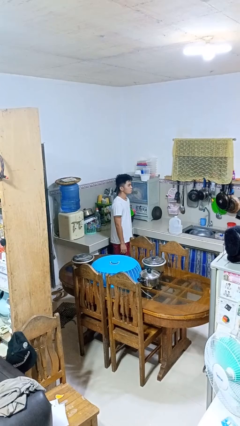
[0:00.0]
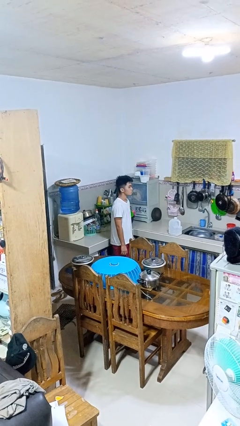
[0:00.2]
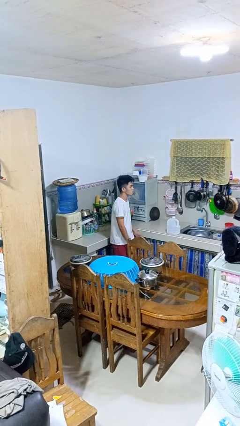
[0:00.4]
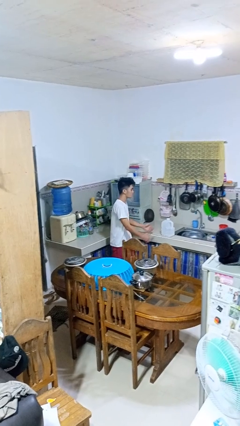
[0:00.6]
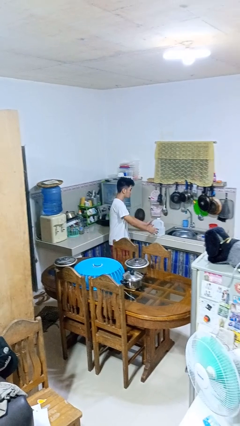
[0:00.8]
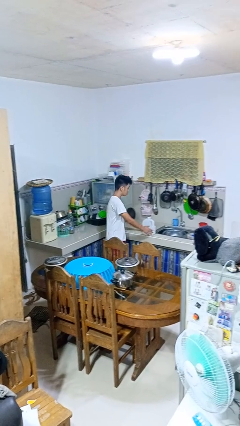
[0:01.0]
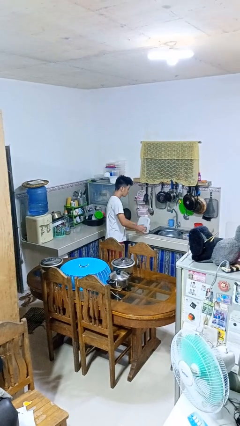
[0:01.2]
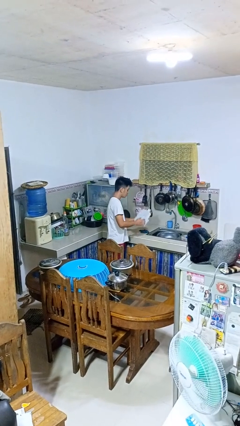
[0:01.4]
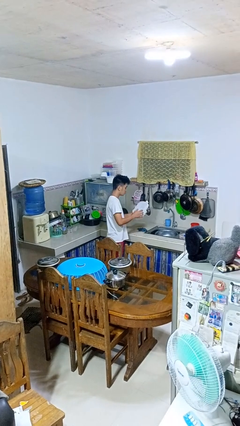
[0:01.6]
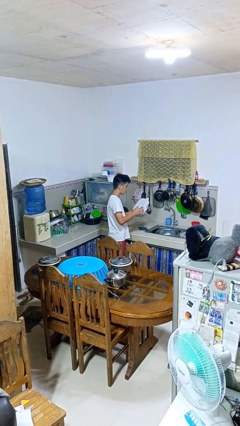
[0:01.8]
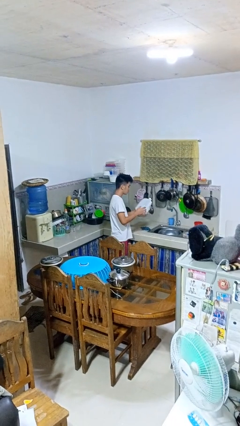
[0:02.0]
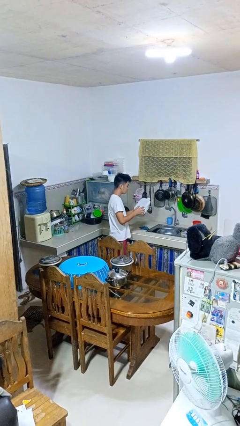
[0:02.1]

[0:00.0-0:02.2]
person picks up object from countertop

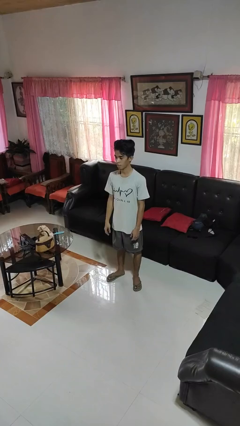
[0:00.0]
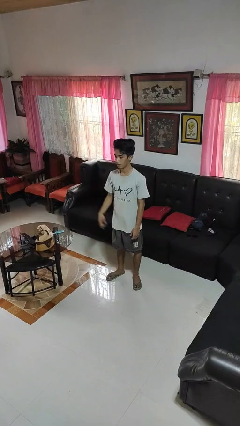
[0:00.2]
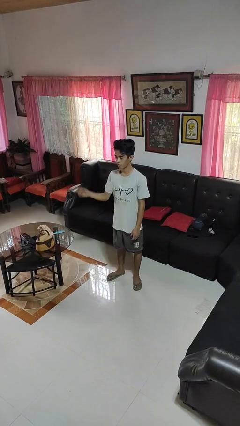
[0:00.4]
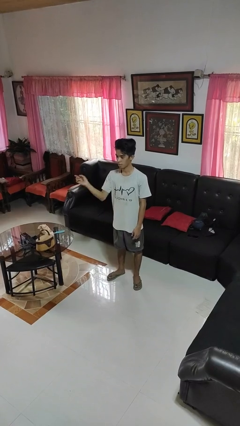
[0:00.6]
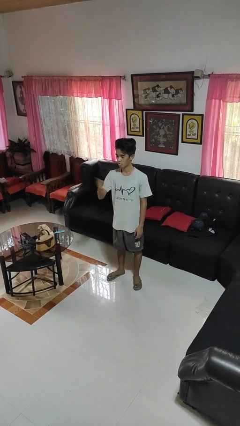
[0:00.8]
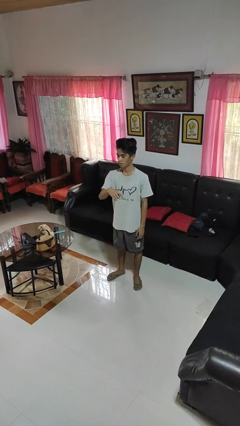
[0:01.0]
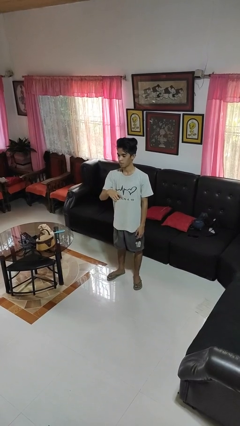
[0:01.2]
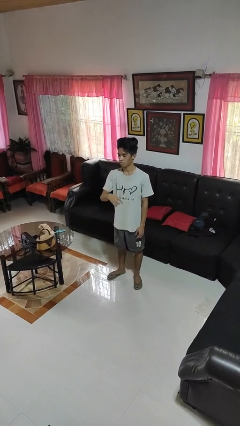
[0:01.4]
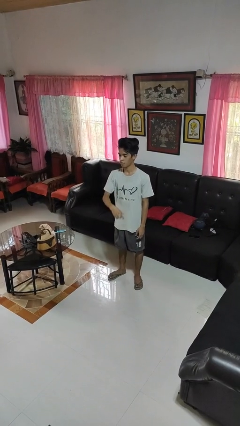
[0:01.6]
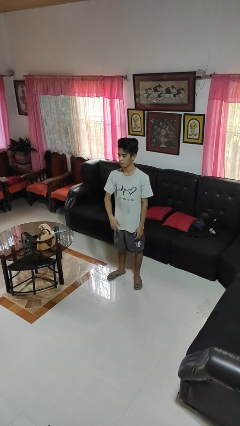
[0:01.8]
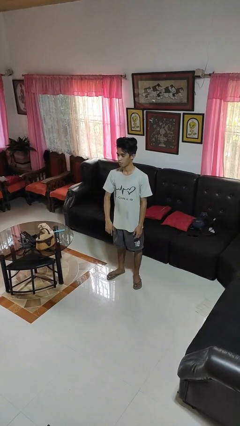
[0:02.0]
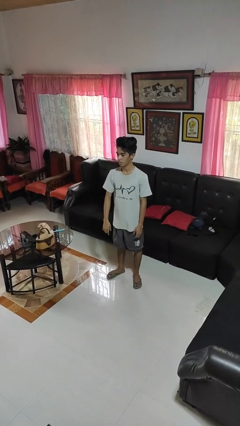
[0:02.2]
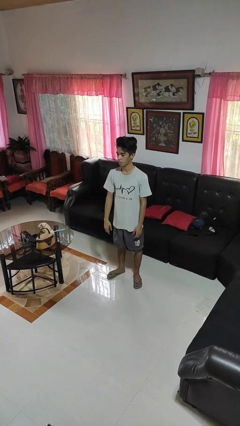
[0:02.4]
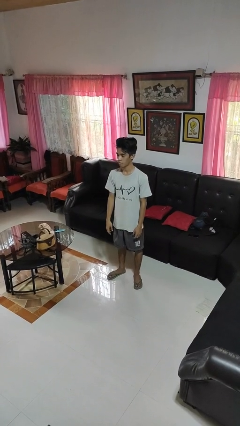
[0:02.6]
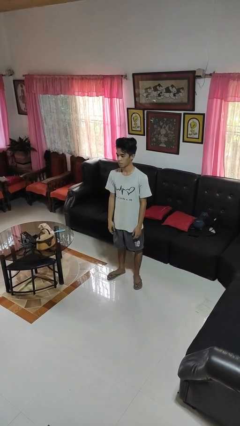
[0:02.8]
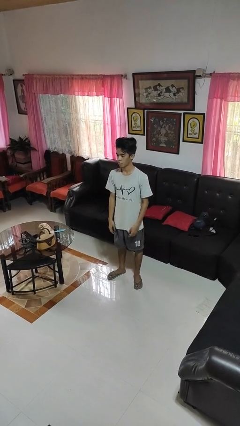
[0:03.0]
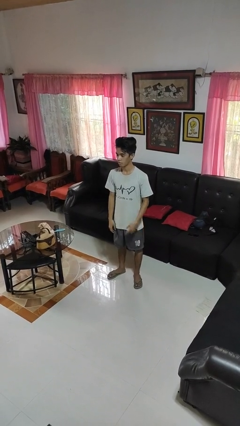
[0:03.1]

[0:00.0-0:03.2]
person gestures swipe left

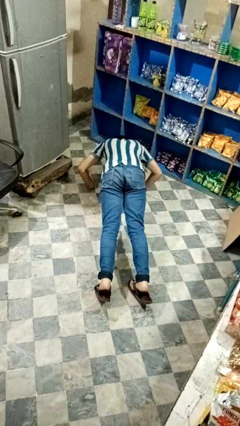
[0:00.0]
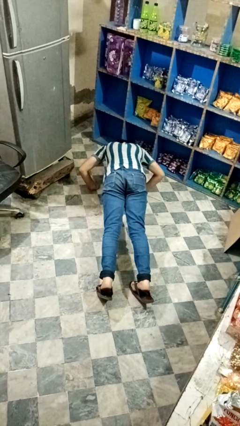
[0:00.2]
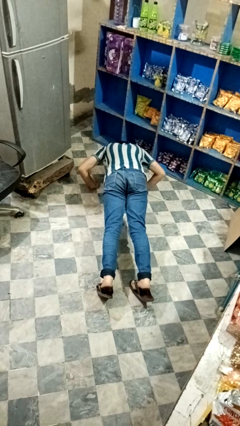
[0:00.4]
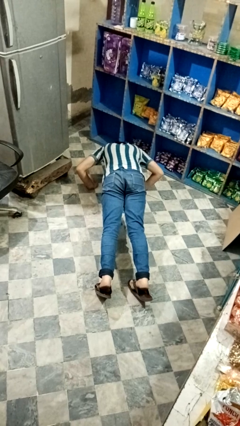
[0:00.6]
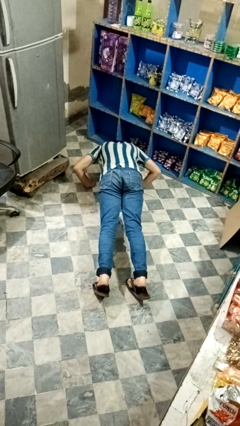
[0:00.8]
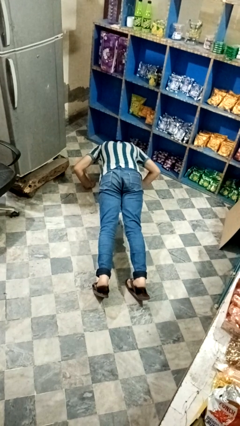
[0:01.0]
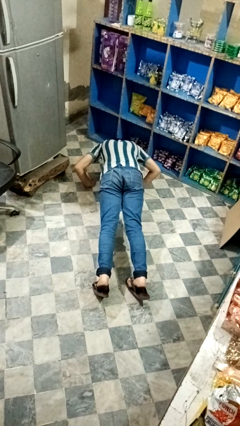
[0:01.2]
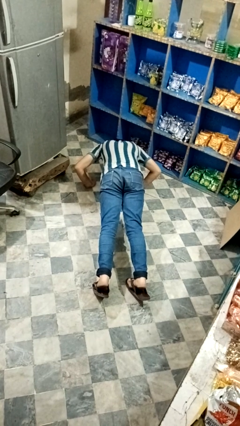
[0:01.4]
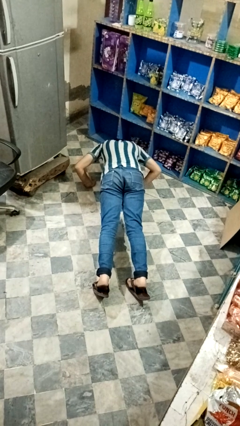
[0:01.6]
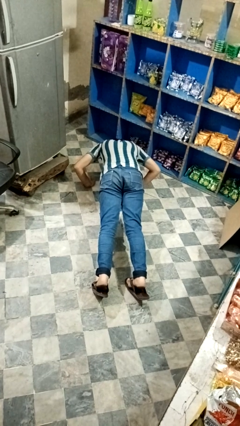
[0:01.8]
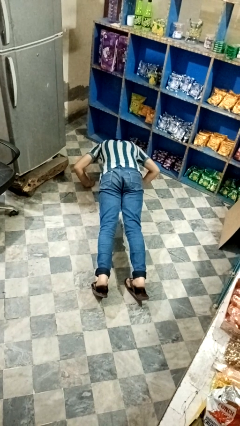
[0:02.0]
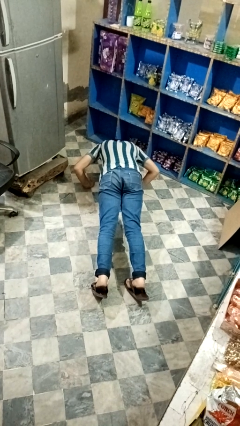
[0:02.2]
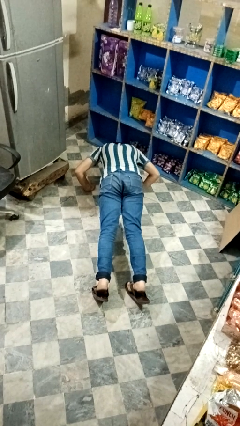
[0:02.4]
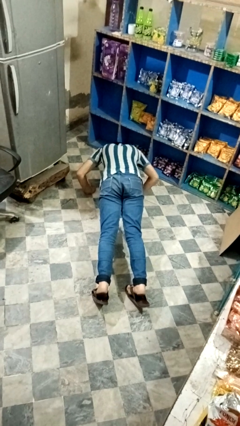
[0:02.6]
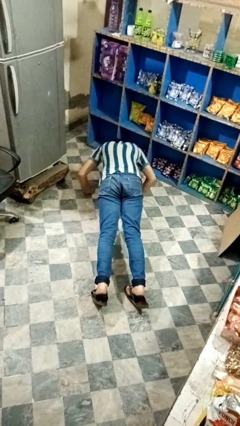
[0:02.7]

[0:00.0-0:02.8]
person exercises with pushup

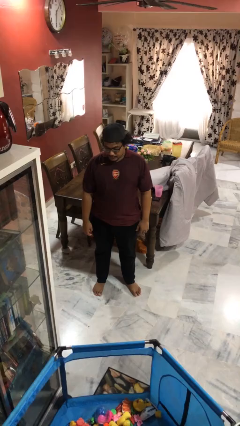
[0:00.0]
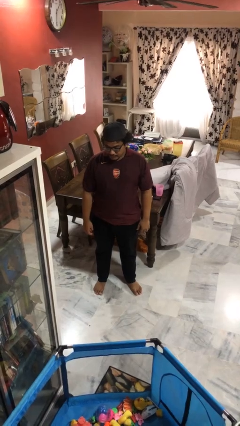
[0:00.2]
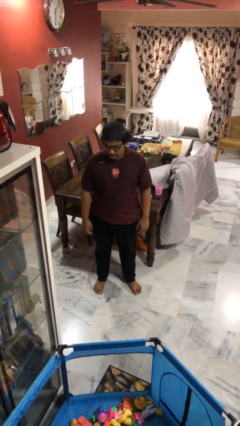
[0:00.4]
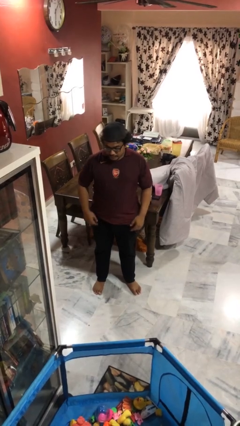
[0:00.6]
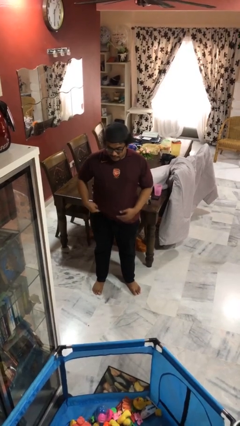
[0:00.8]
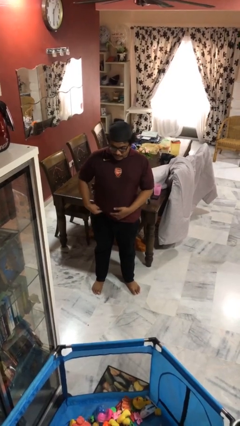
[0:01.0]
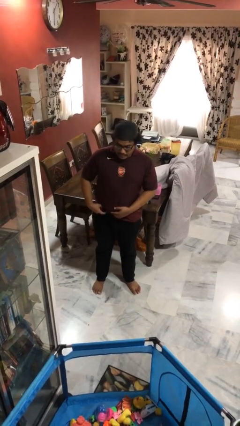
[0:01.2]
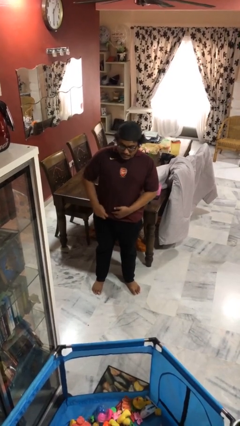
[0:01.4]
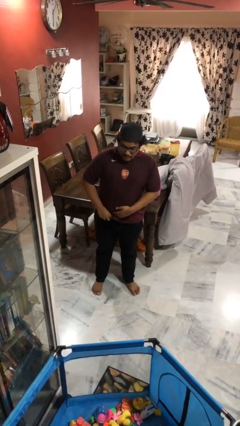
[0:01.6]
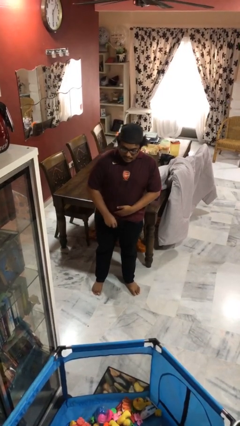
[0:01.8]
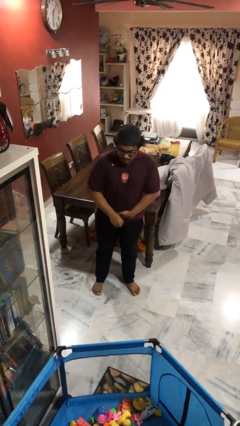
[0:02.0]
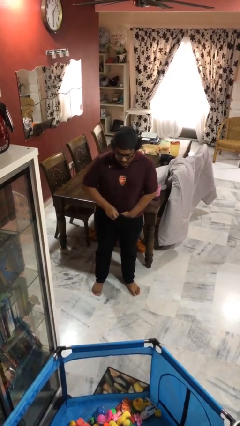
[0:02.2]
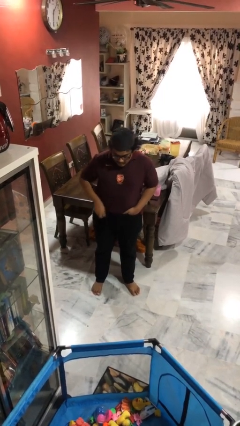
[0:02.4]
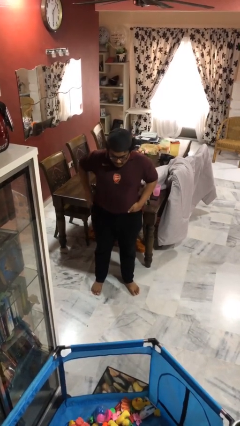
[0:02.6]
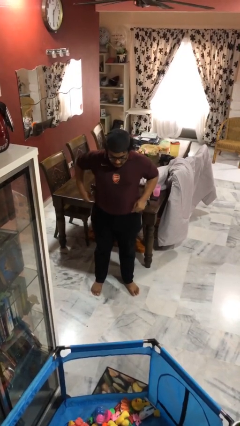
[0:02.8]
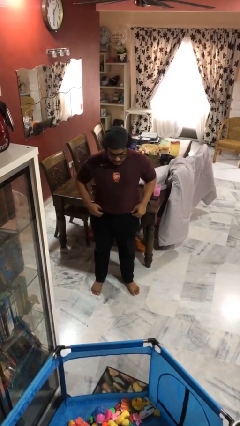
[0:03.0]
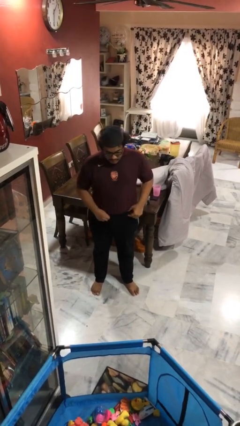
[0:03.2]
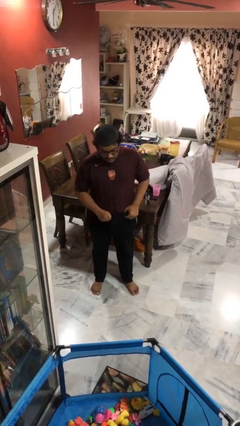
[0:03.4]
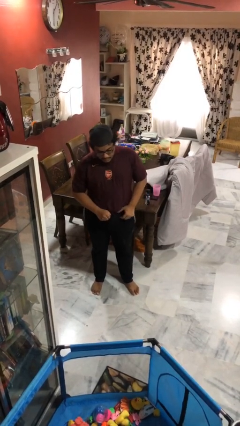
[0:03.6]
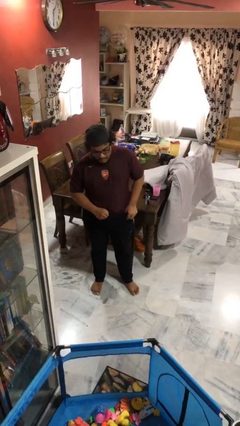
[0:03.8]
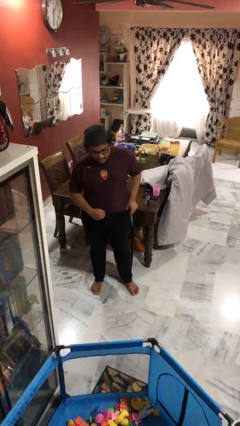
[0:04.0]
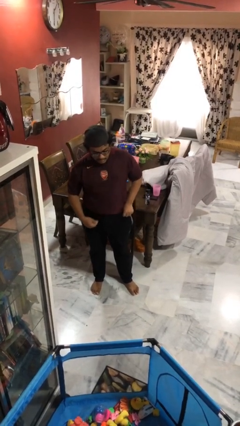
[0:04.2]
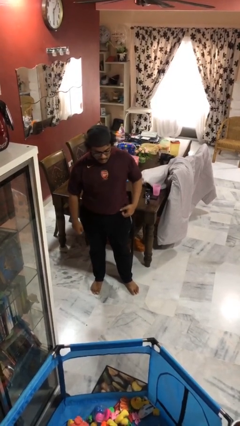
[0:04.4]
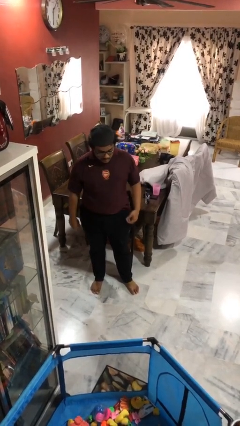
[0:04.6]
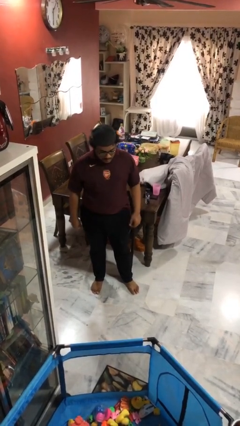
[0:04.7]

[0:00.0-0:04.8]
person tucks in shirt

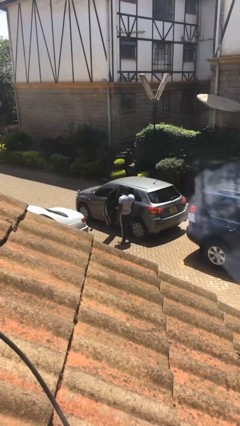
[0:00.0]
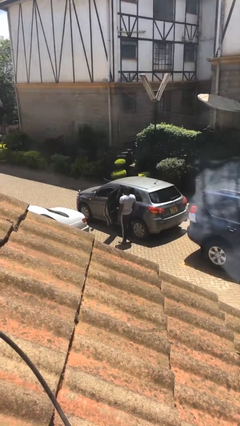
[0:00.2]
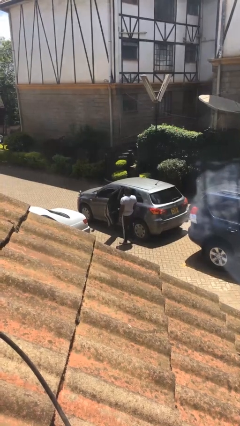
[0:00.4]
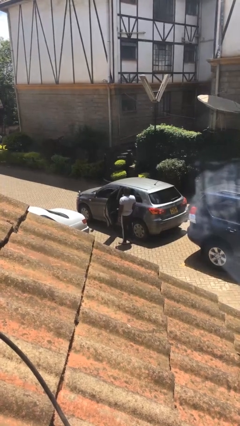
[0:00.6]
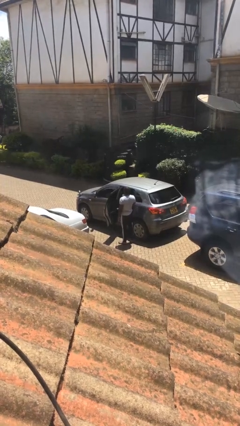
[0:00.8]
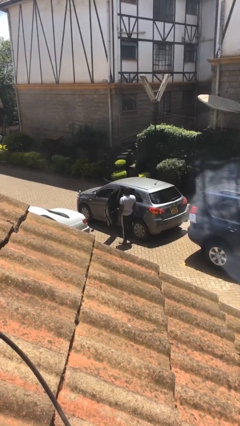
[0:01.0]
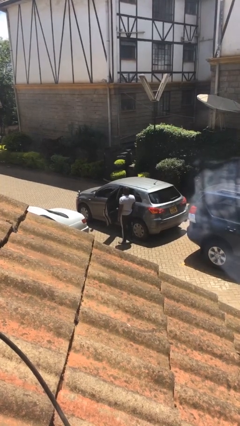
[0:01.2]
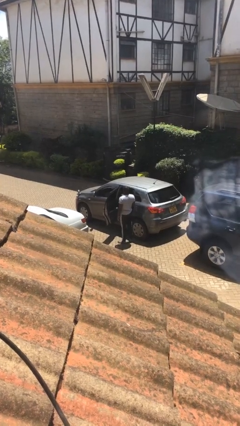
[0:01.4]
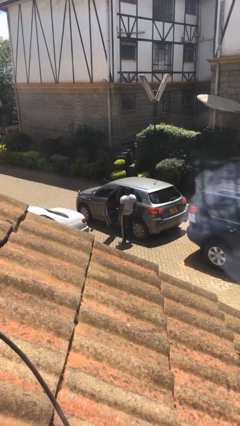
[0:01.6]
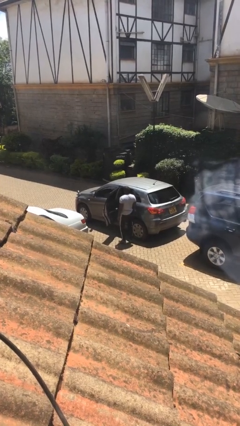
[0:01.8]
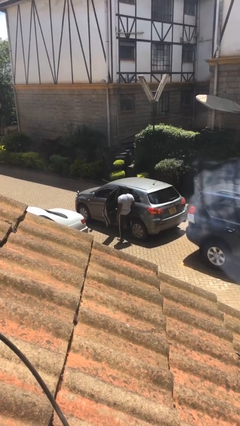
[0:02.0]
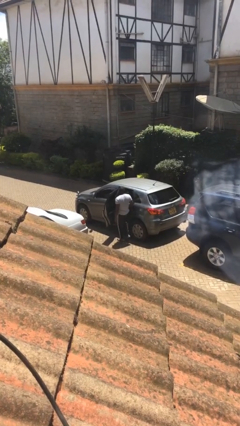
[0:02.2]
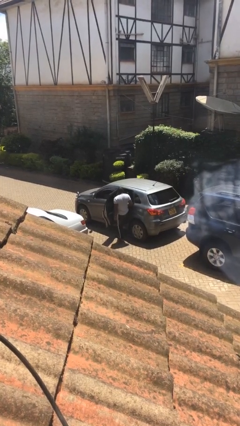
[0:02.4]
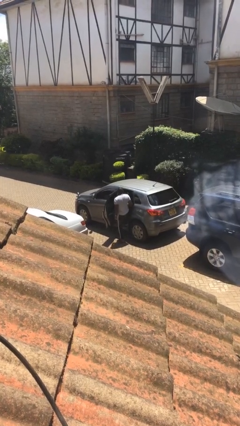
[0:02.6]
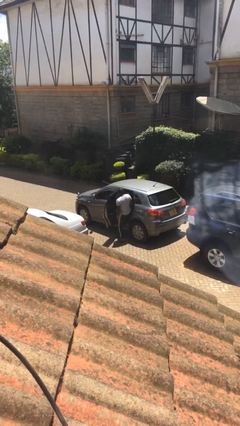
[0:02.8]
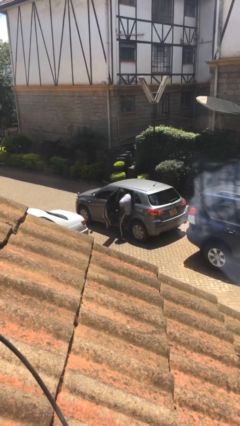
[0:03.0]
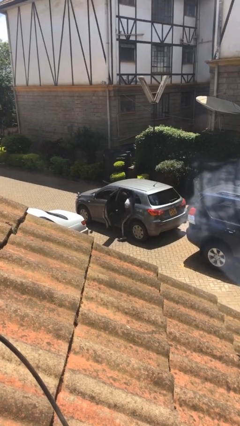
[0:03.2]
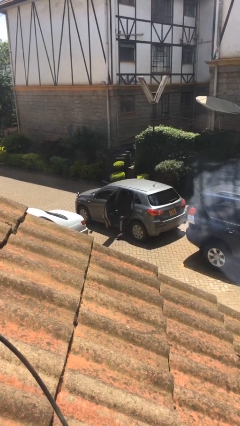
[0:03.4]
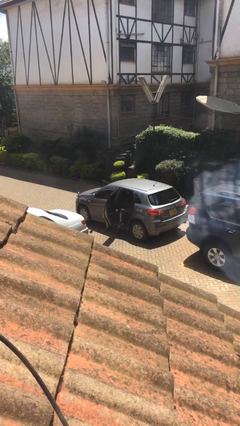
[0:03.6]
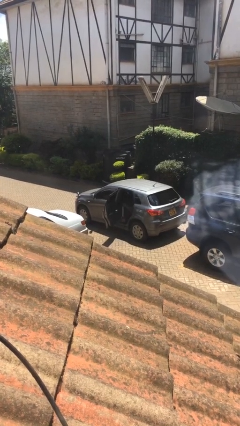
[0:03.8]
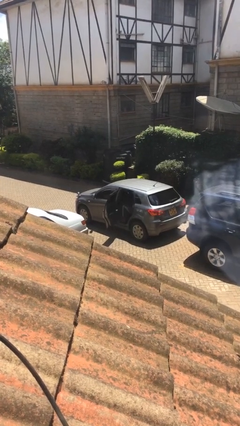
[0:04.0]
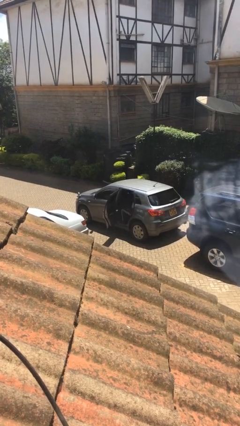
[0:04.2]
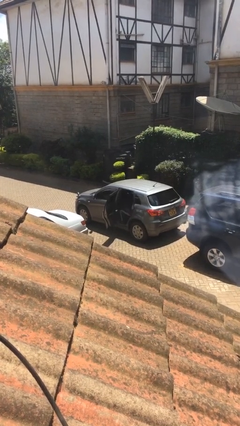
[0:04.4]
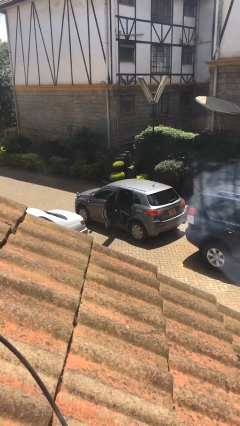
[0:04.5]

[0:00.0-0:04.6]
person enters car
